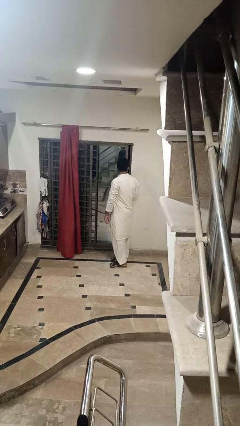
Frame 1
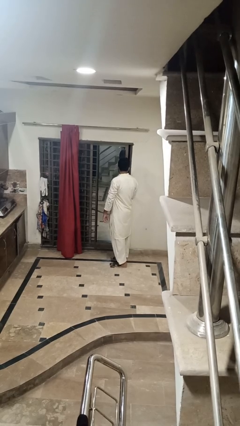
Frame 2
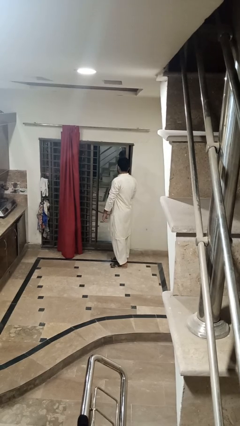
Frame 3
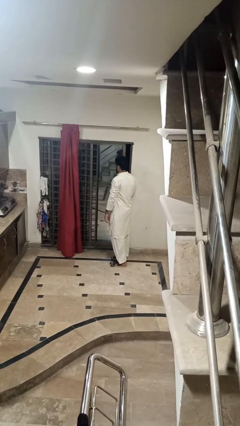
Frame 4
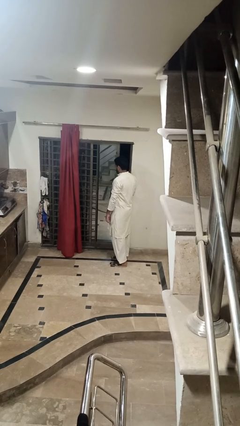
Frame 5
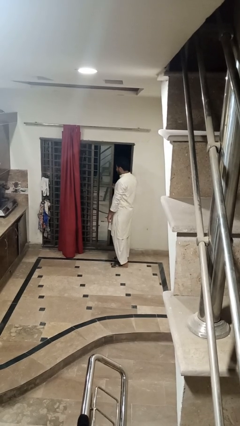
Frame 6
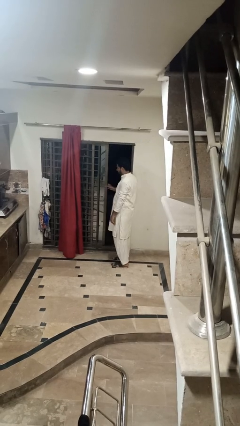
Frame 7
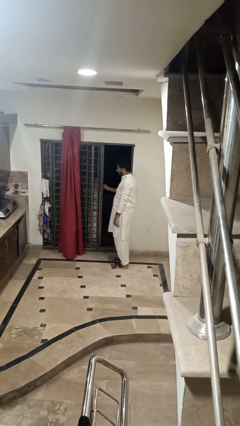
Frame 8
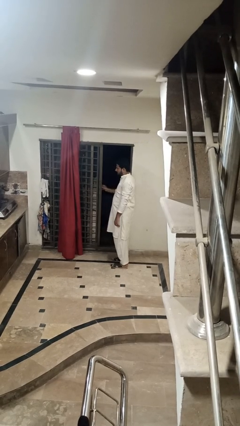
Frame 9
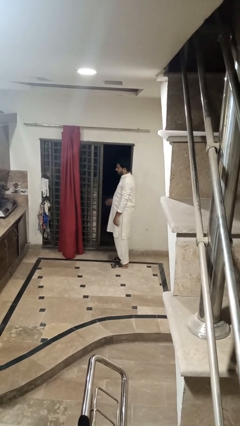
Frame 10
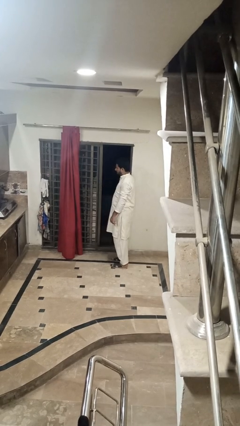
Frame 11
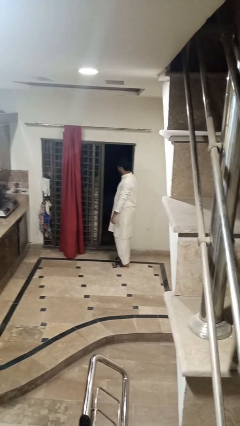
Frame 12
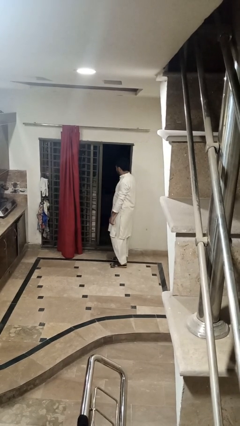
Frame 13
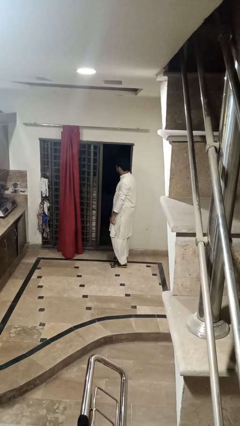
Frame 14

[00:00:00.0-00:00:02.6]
person opens home window

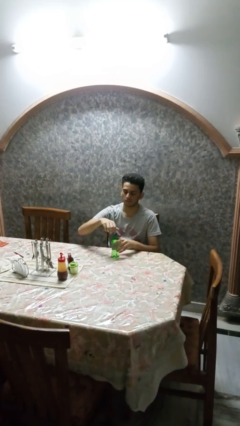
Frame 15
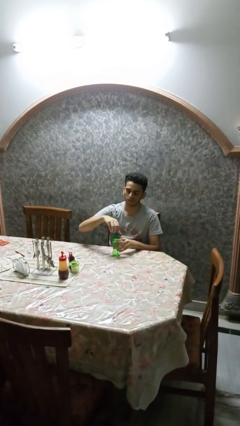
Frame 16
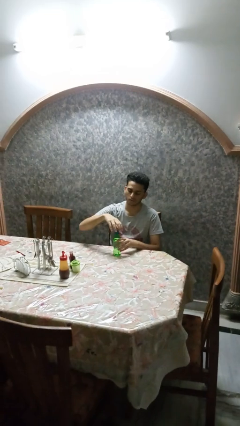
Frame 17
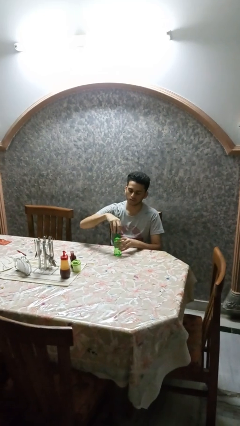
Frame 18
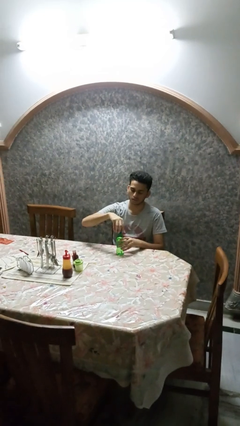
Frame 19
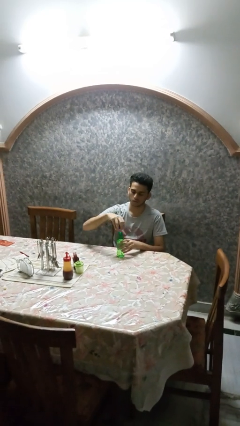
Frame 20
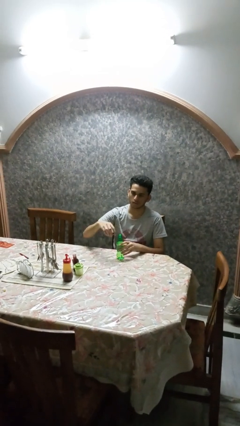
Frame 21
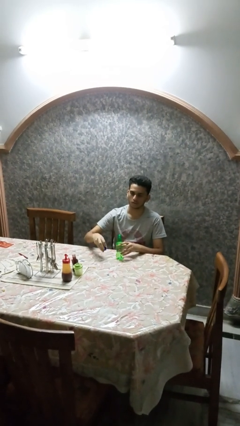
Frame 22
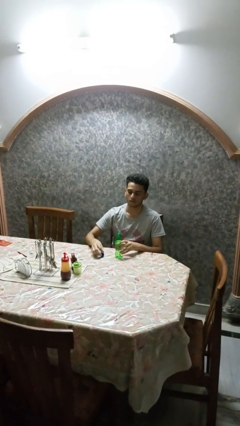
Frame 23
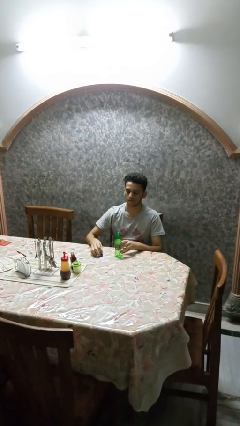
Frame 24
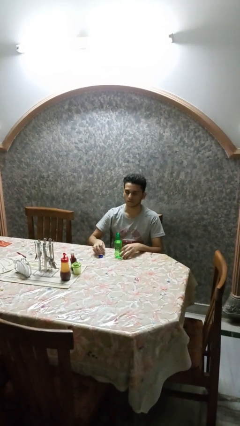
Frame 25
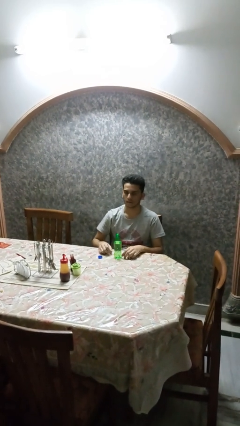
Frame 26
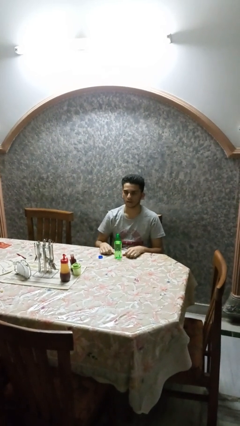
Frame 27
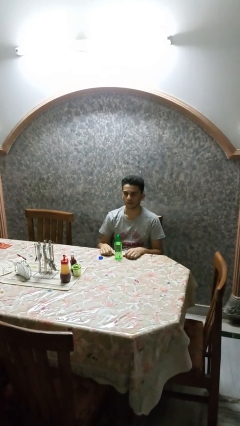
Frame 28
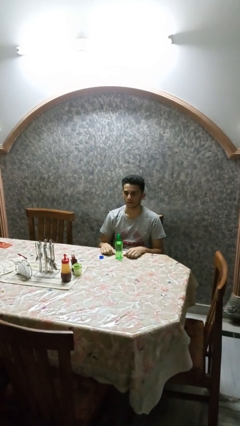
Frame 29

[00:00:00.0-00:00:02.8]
person unscrews lid from bottle

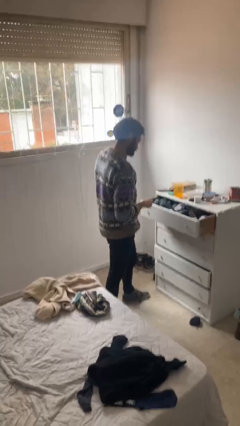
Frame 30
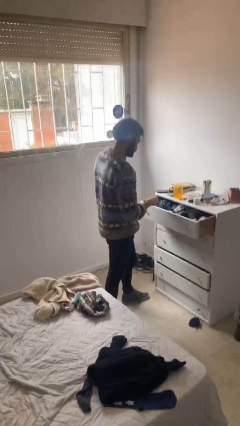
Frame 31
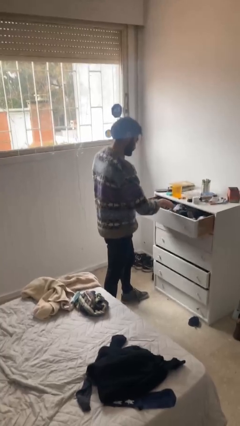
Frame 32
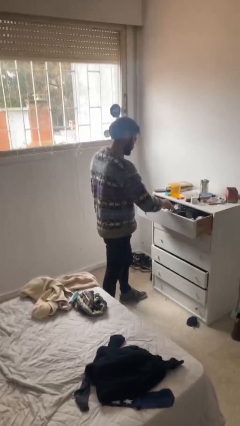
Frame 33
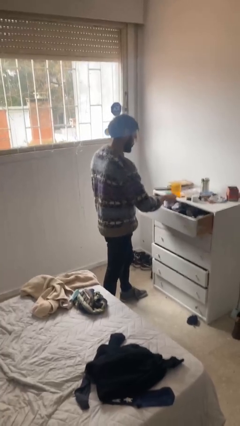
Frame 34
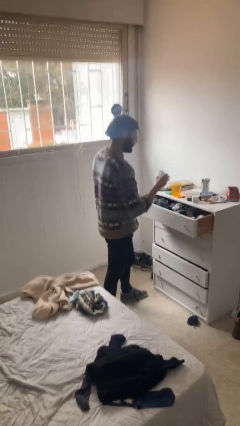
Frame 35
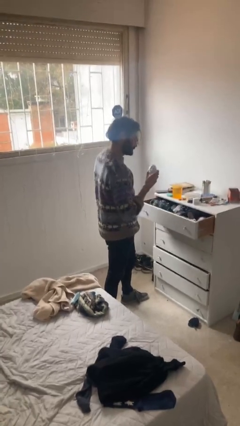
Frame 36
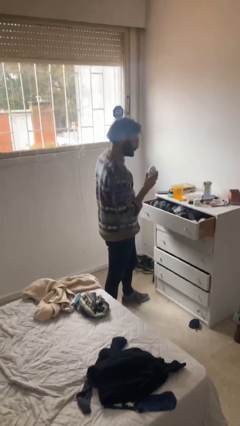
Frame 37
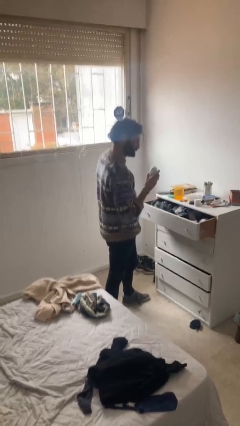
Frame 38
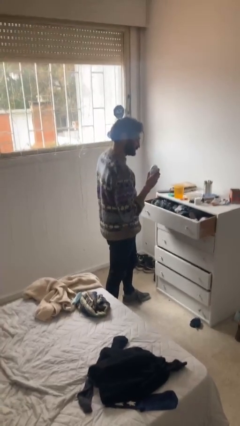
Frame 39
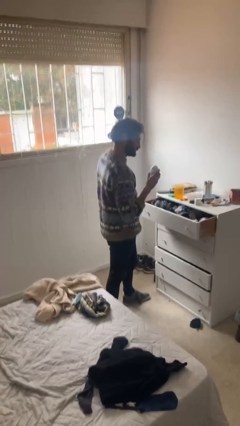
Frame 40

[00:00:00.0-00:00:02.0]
person takes clothes from dresser

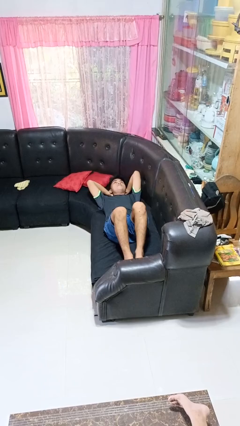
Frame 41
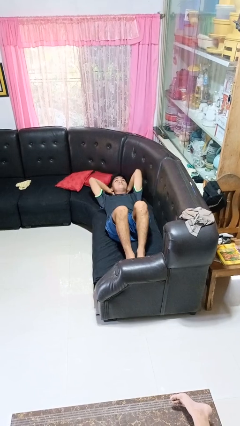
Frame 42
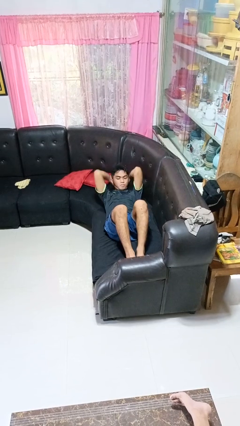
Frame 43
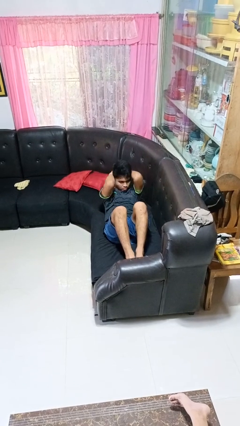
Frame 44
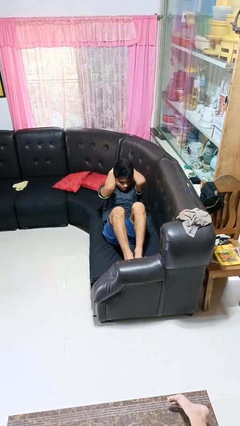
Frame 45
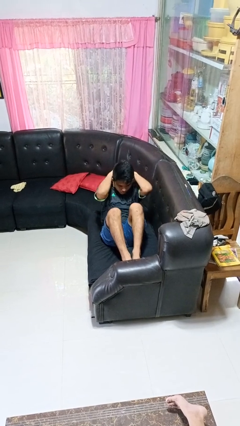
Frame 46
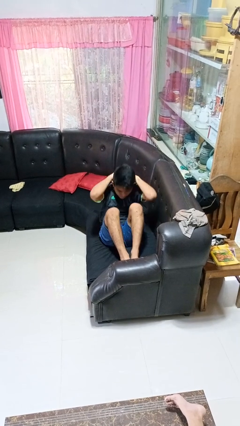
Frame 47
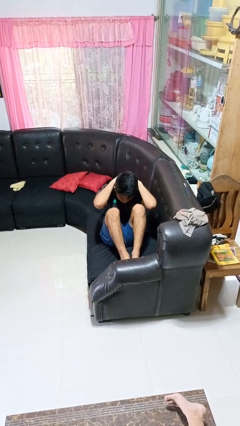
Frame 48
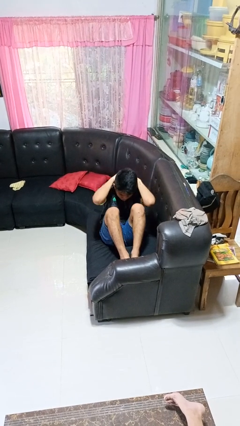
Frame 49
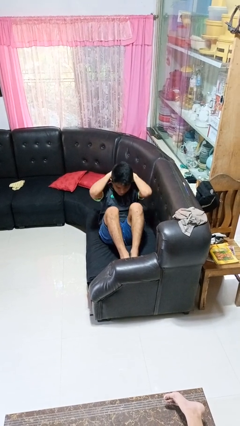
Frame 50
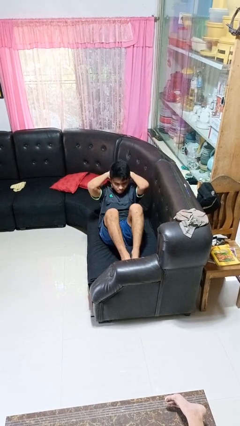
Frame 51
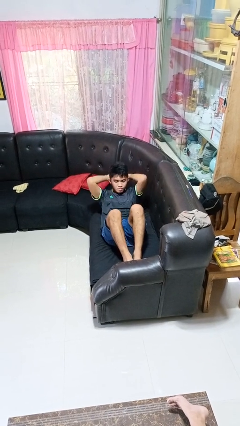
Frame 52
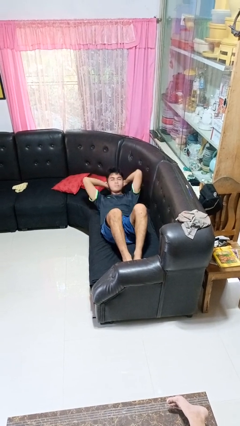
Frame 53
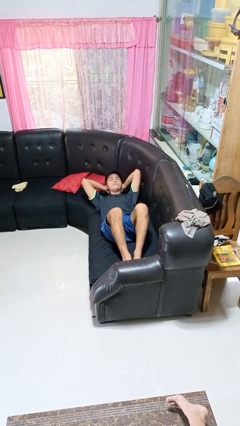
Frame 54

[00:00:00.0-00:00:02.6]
person exercises with situp

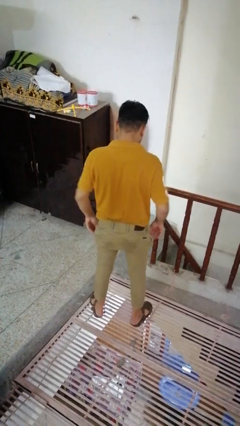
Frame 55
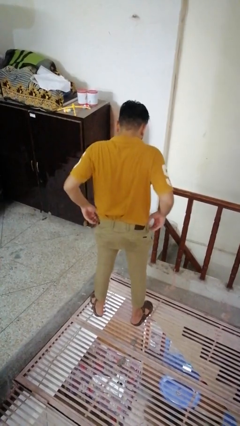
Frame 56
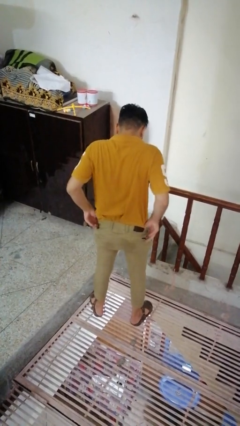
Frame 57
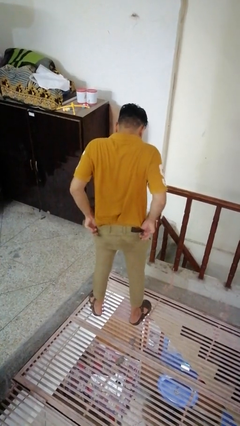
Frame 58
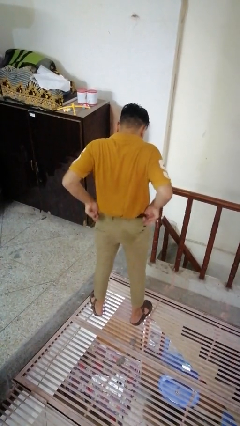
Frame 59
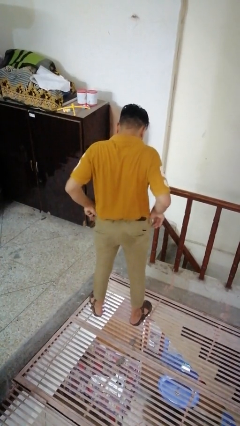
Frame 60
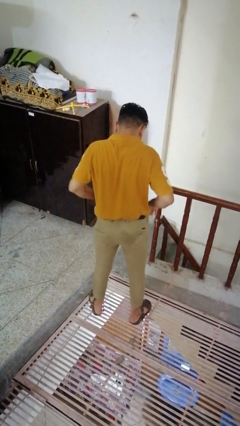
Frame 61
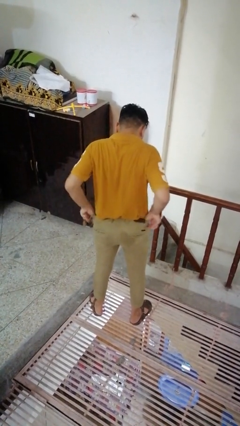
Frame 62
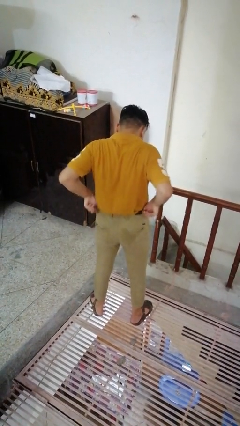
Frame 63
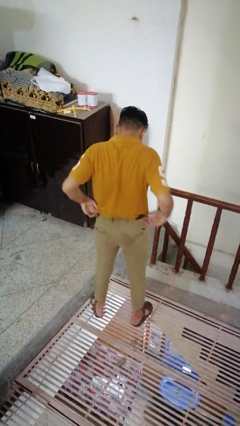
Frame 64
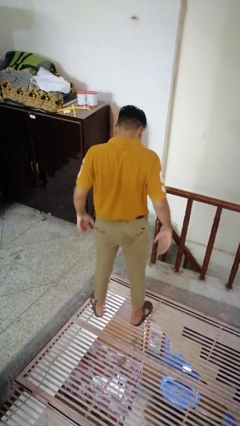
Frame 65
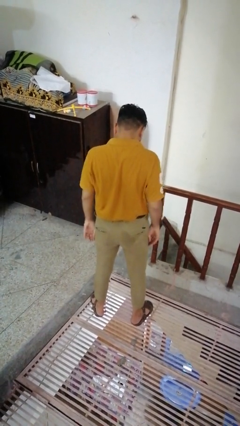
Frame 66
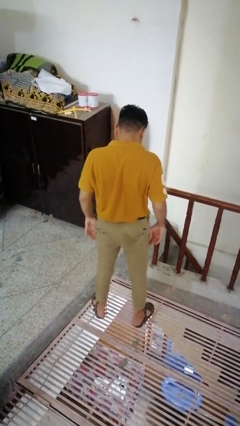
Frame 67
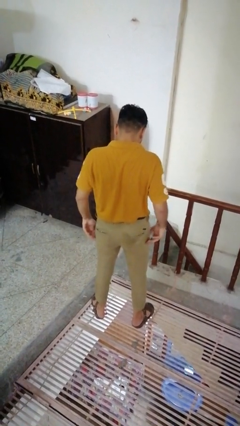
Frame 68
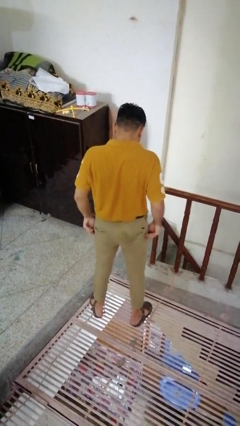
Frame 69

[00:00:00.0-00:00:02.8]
person hikes up pants

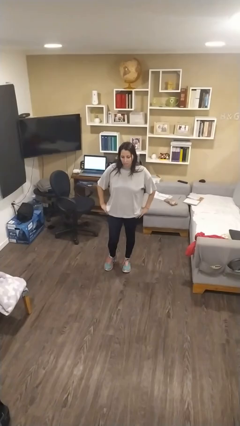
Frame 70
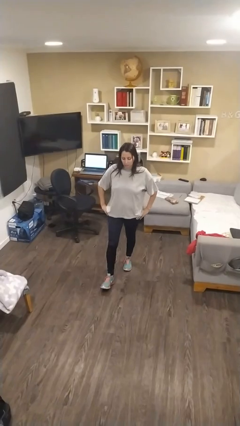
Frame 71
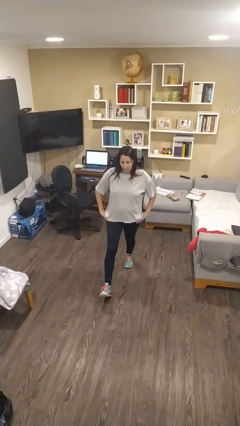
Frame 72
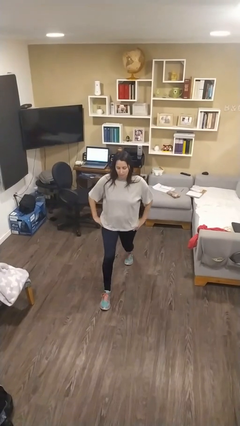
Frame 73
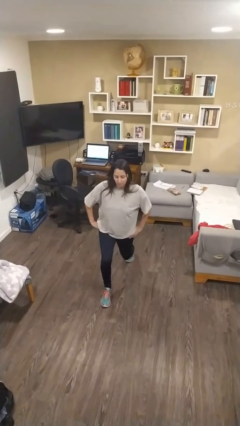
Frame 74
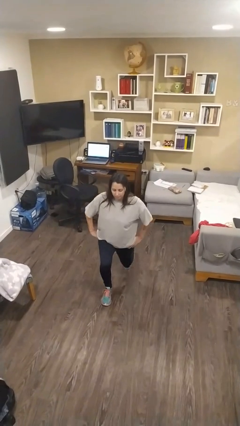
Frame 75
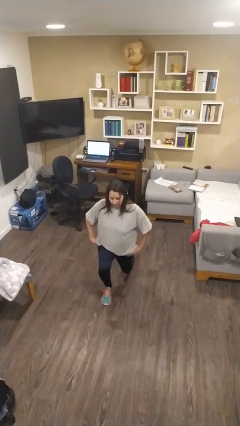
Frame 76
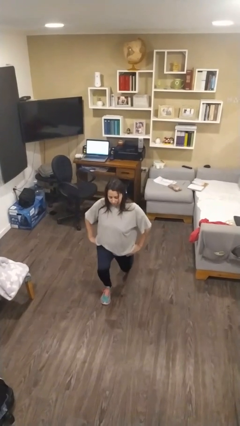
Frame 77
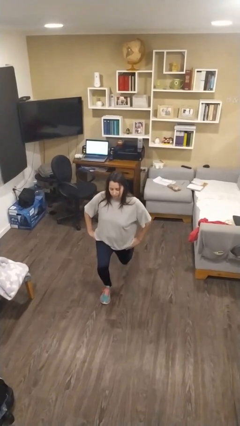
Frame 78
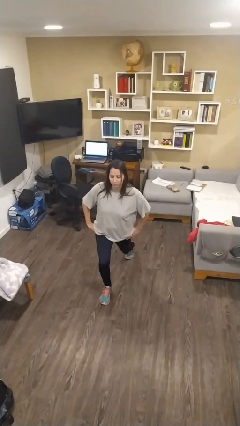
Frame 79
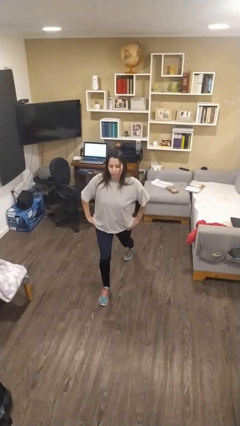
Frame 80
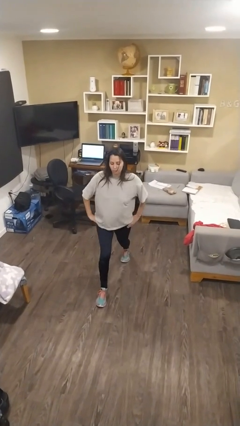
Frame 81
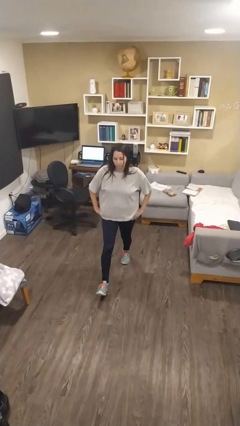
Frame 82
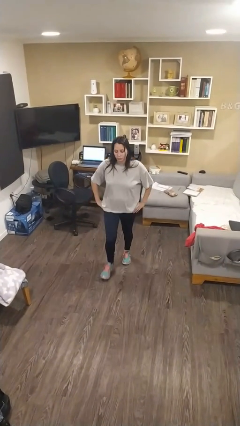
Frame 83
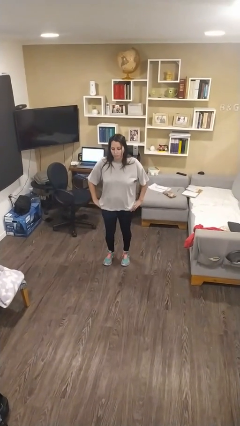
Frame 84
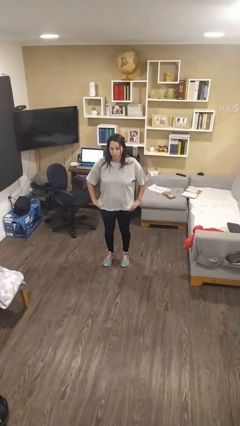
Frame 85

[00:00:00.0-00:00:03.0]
person exercises with lunges

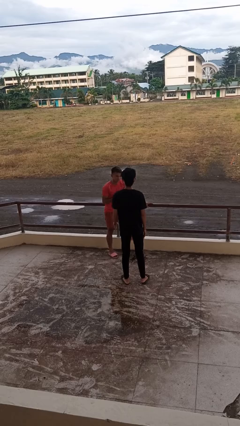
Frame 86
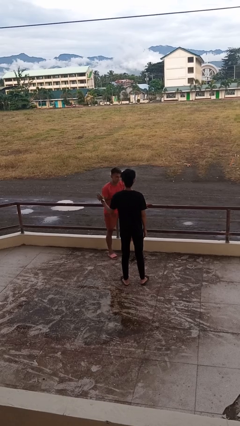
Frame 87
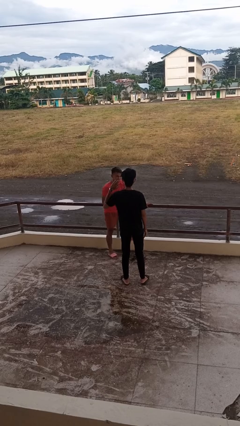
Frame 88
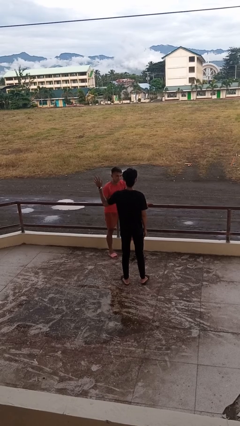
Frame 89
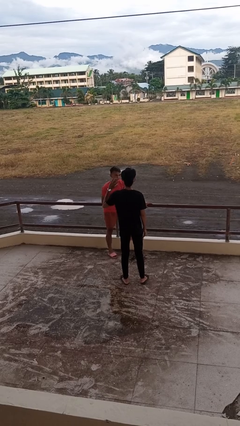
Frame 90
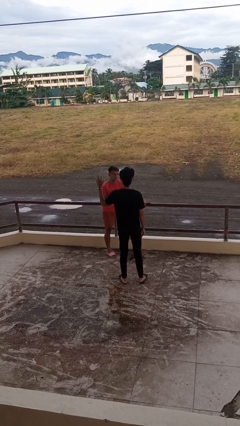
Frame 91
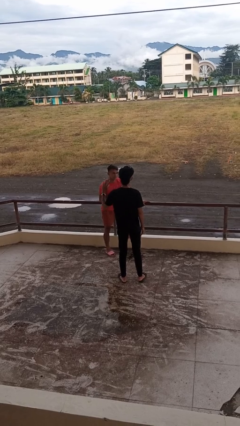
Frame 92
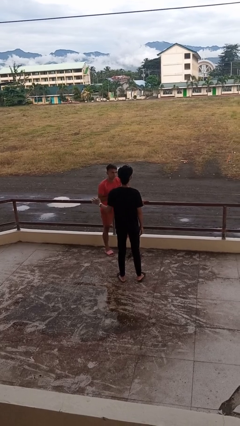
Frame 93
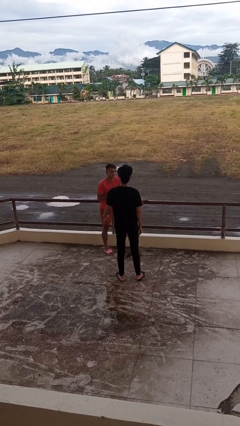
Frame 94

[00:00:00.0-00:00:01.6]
person waves at person
